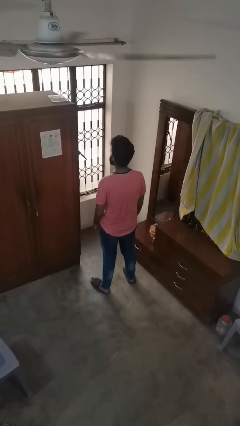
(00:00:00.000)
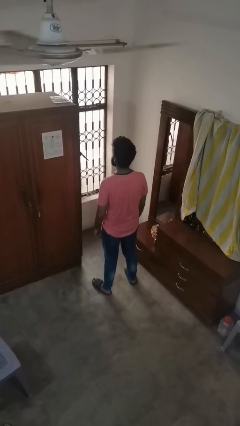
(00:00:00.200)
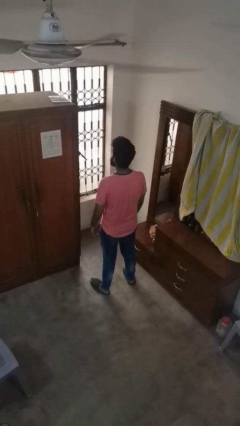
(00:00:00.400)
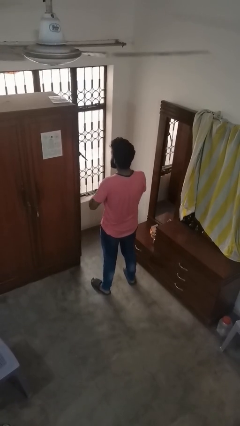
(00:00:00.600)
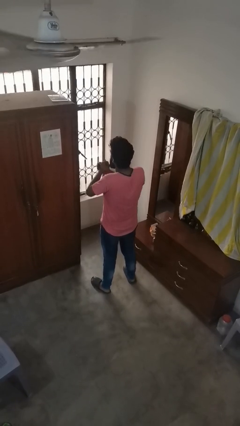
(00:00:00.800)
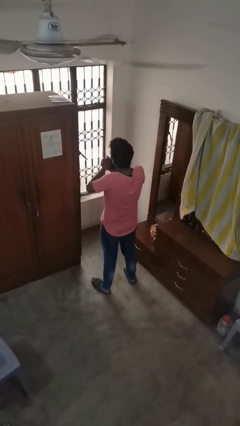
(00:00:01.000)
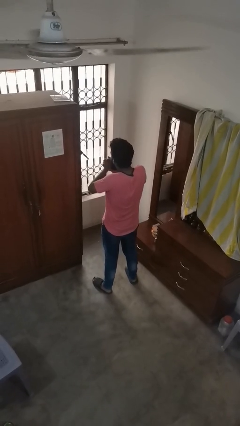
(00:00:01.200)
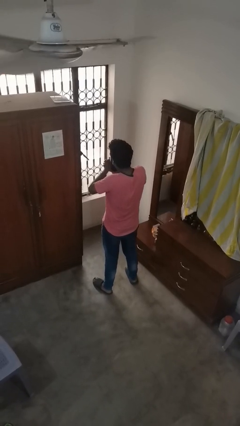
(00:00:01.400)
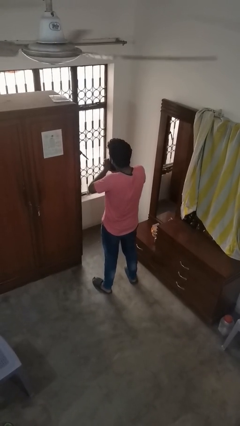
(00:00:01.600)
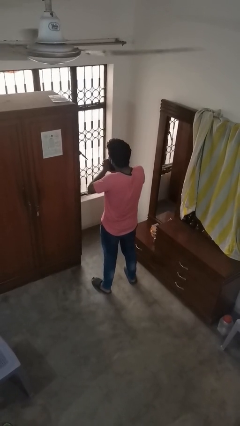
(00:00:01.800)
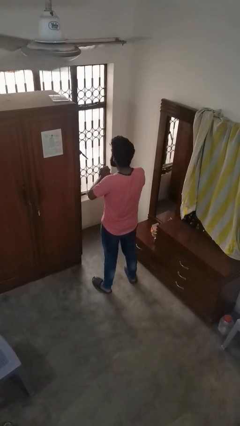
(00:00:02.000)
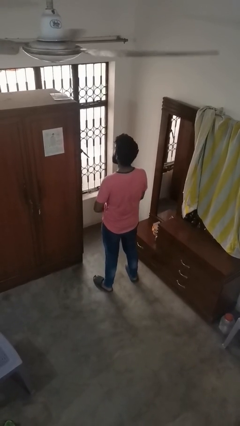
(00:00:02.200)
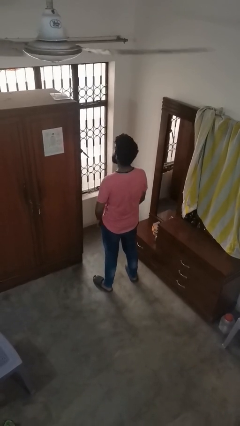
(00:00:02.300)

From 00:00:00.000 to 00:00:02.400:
person blows into hands

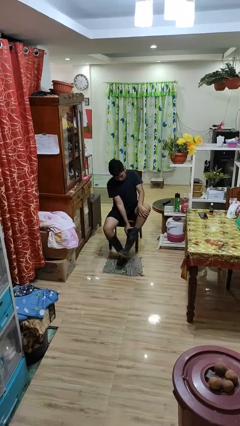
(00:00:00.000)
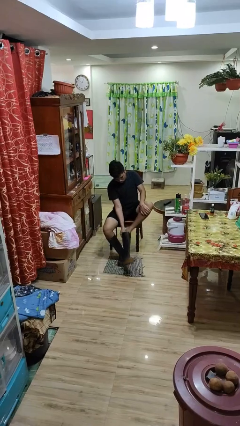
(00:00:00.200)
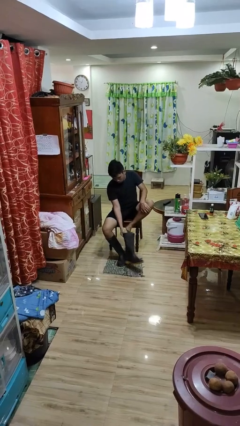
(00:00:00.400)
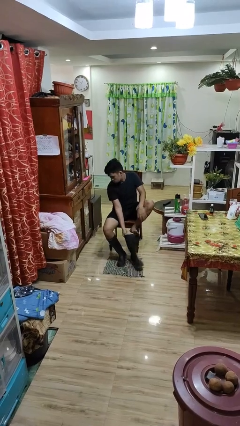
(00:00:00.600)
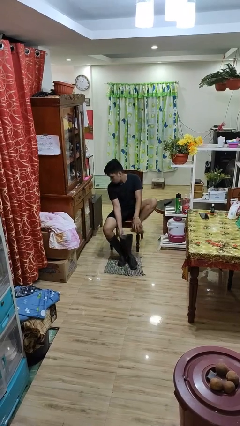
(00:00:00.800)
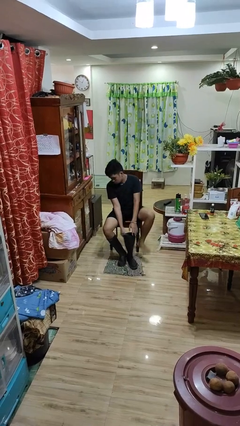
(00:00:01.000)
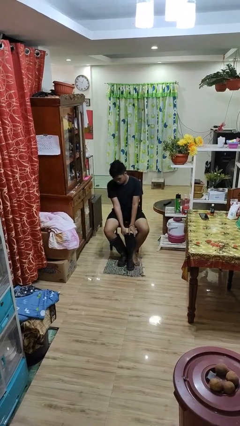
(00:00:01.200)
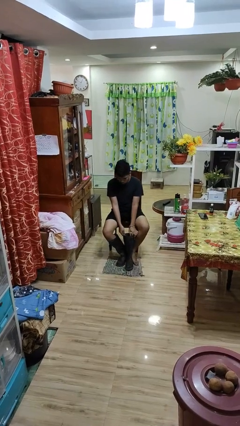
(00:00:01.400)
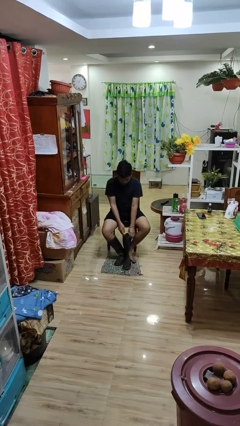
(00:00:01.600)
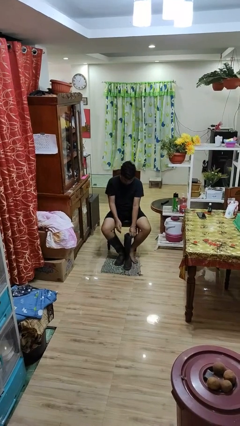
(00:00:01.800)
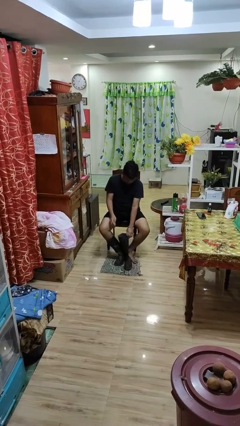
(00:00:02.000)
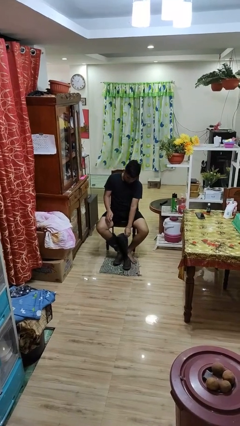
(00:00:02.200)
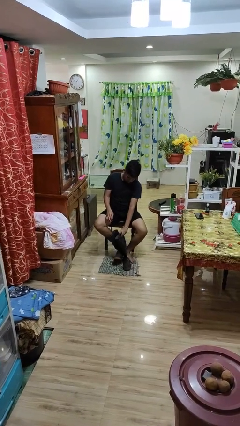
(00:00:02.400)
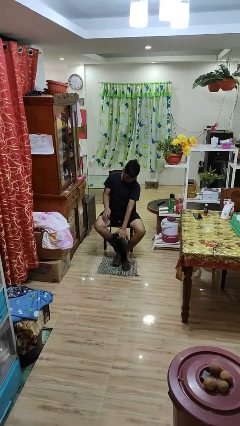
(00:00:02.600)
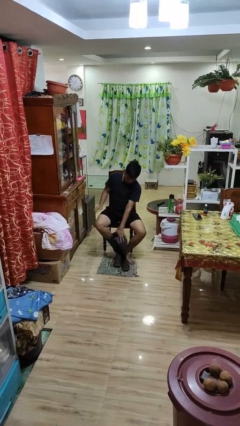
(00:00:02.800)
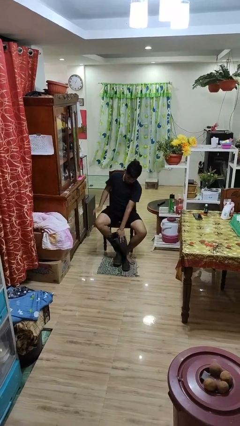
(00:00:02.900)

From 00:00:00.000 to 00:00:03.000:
person uses television remote

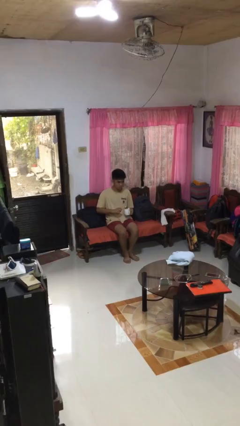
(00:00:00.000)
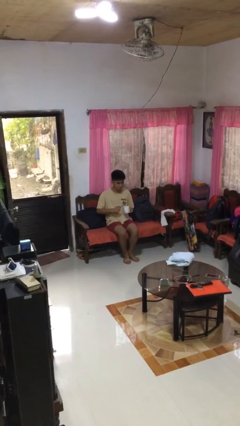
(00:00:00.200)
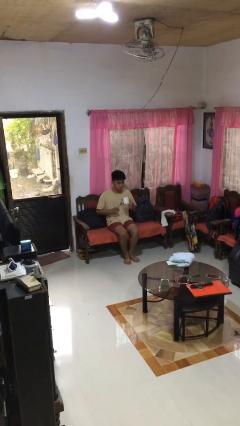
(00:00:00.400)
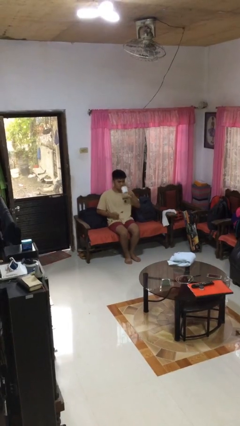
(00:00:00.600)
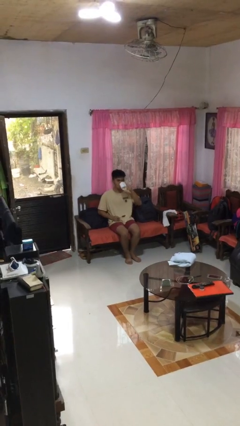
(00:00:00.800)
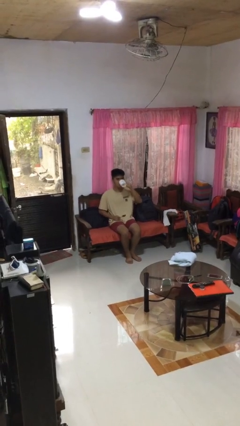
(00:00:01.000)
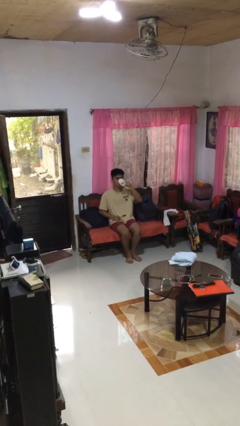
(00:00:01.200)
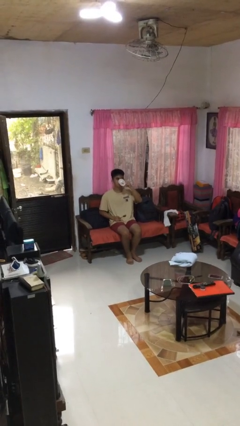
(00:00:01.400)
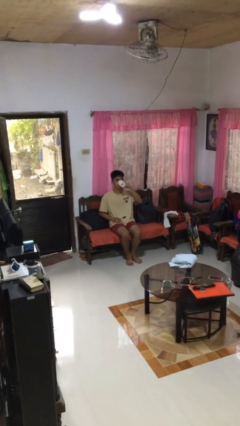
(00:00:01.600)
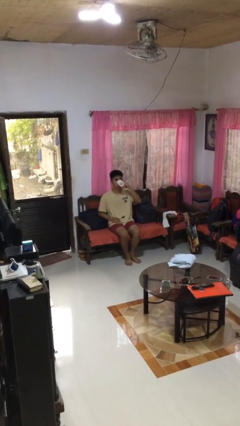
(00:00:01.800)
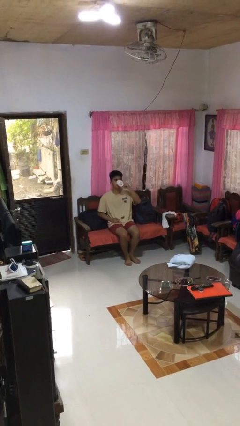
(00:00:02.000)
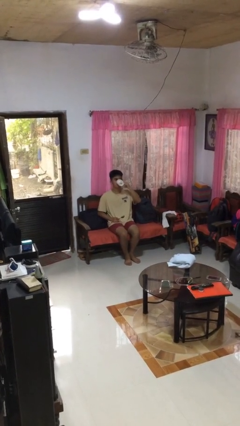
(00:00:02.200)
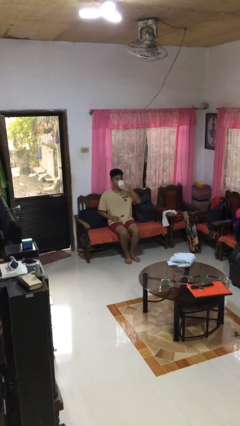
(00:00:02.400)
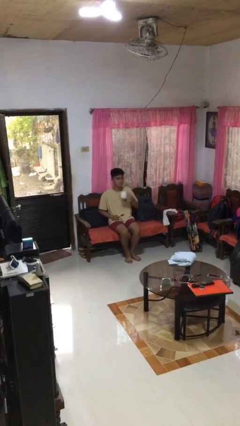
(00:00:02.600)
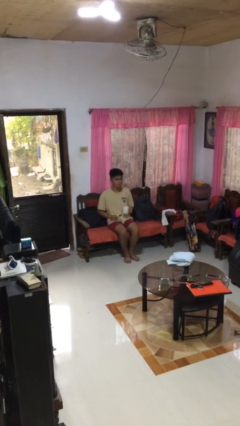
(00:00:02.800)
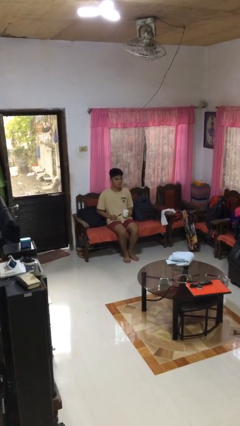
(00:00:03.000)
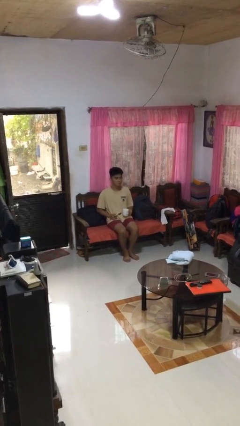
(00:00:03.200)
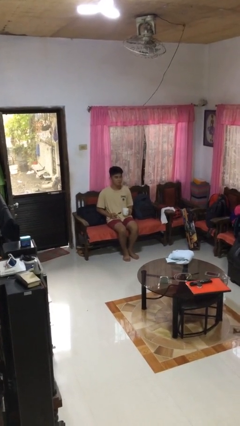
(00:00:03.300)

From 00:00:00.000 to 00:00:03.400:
person drinks from mug

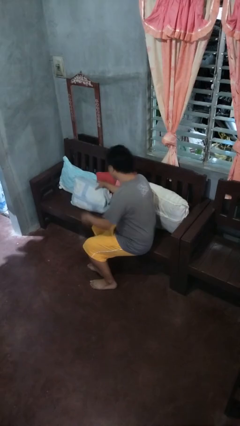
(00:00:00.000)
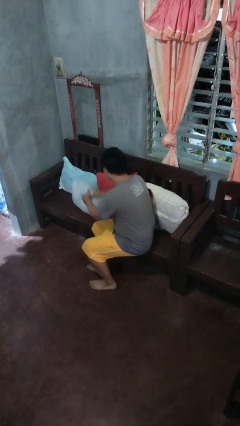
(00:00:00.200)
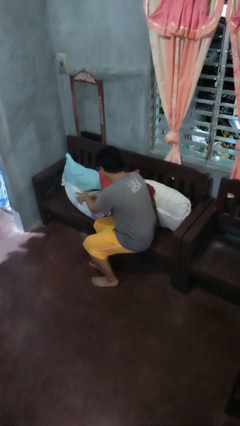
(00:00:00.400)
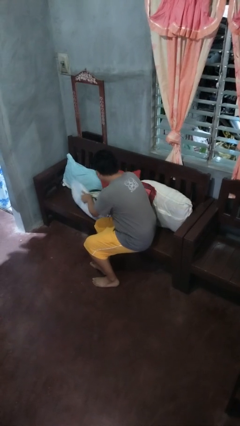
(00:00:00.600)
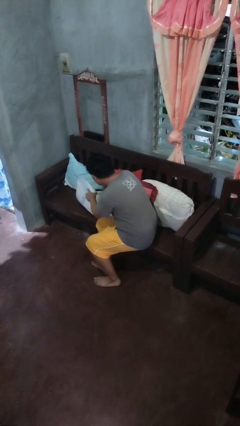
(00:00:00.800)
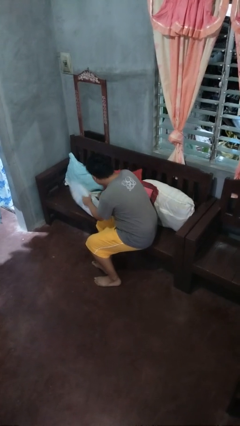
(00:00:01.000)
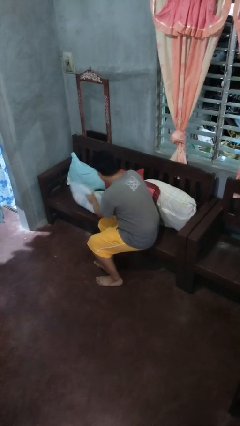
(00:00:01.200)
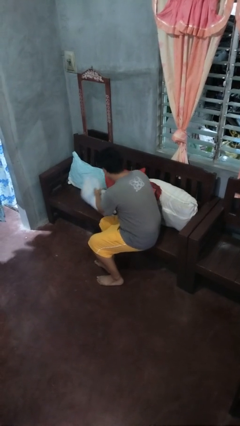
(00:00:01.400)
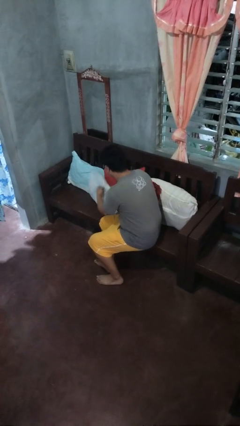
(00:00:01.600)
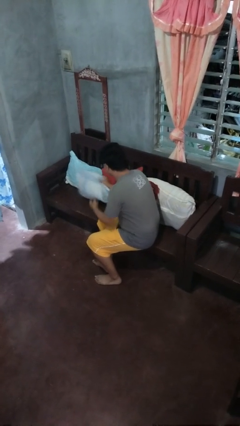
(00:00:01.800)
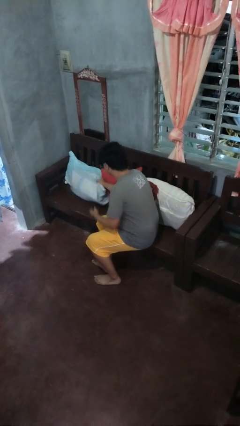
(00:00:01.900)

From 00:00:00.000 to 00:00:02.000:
person searches in couch

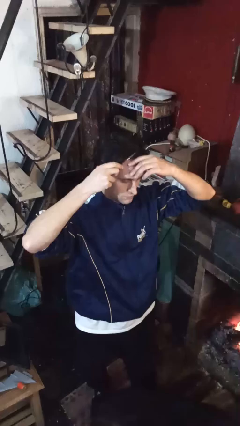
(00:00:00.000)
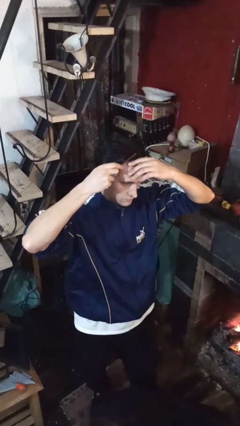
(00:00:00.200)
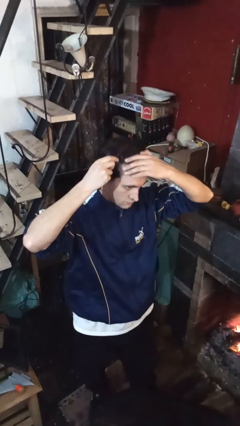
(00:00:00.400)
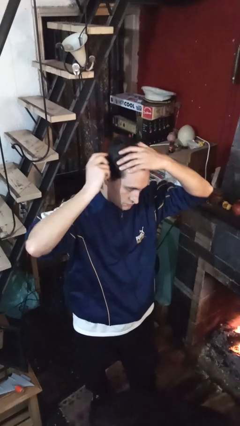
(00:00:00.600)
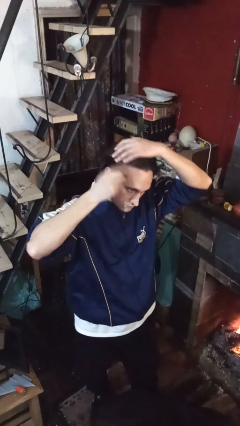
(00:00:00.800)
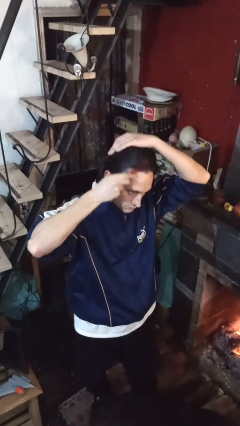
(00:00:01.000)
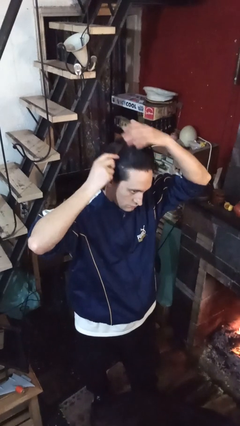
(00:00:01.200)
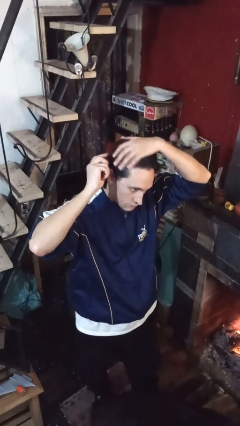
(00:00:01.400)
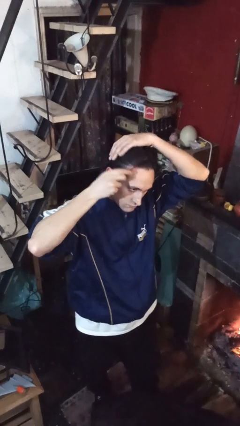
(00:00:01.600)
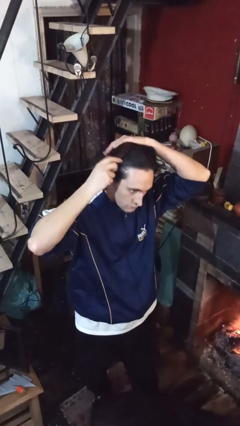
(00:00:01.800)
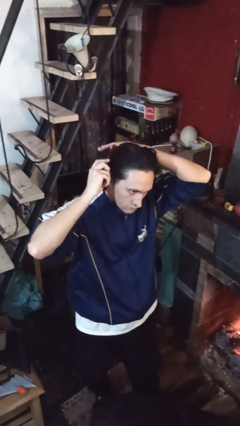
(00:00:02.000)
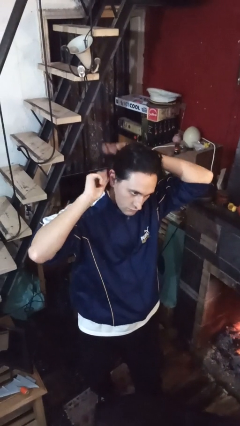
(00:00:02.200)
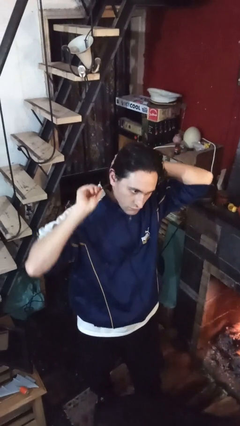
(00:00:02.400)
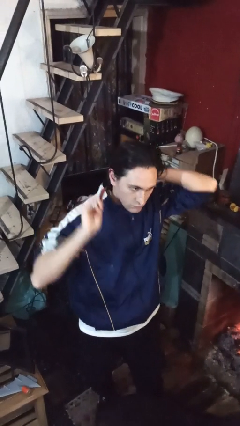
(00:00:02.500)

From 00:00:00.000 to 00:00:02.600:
person brushes hair

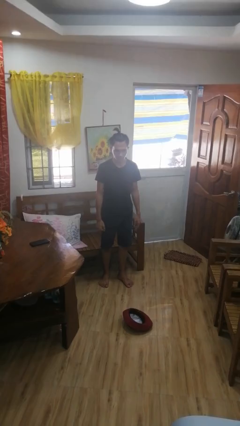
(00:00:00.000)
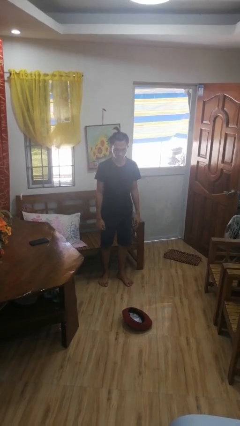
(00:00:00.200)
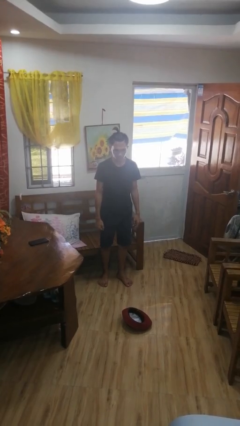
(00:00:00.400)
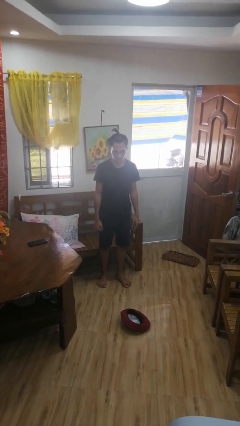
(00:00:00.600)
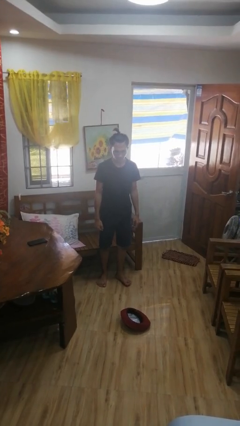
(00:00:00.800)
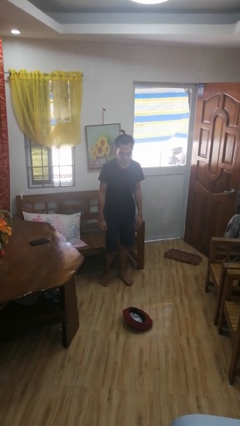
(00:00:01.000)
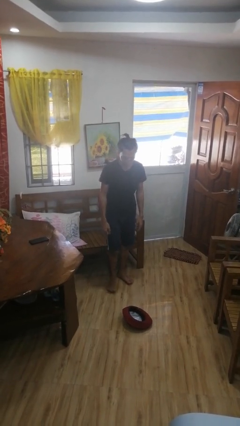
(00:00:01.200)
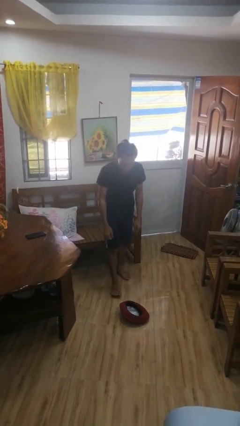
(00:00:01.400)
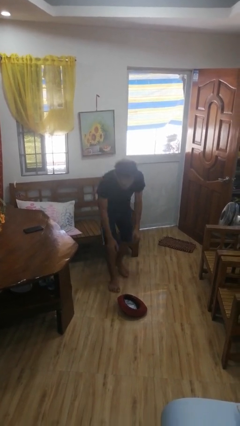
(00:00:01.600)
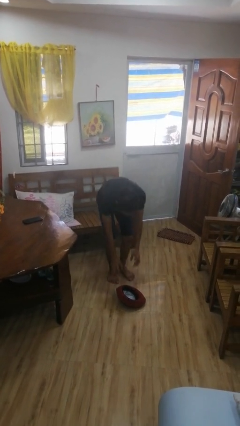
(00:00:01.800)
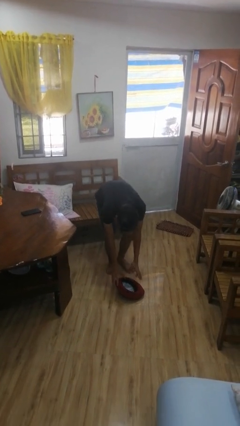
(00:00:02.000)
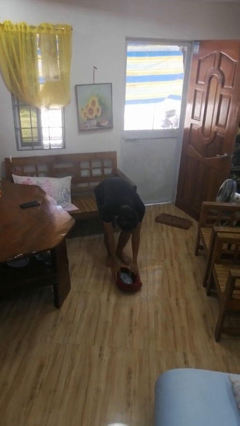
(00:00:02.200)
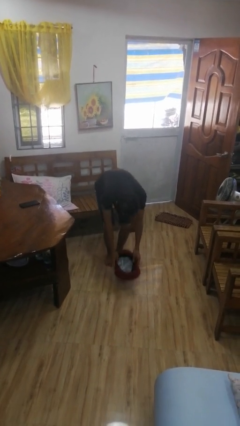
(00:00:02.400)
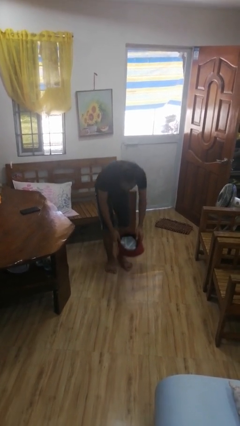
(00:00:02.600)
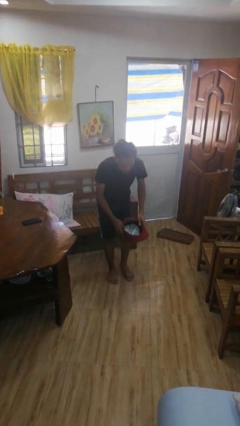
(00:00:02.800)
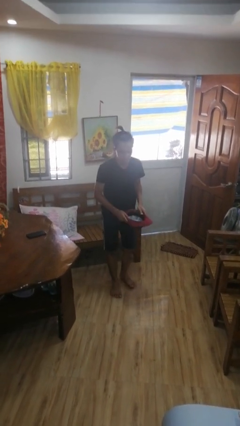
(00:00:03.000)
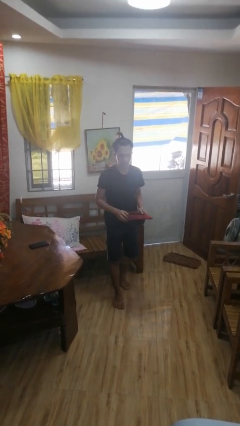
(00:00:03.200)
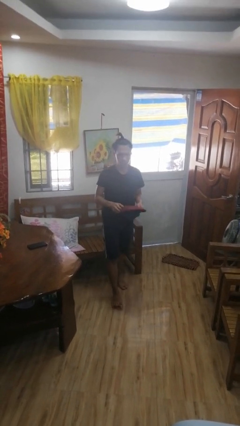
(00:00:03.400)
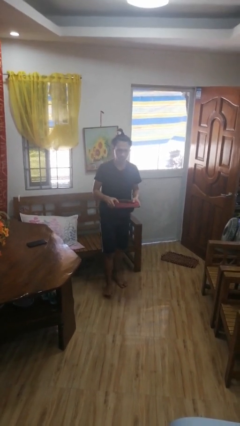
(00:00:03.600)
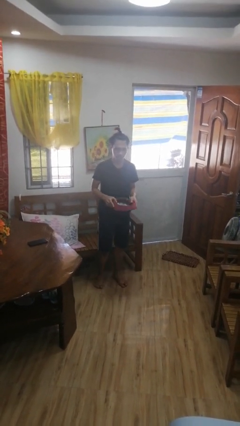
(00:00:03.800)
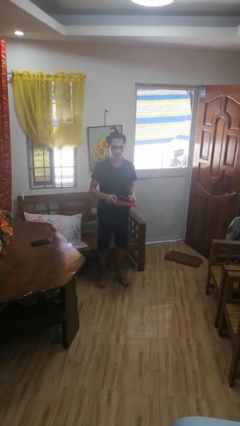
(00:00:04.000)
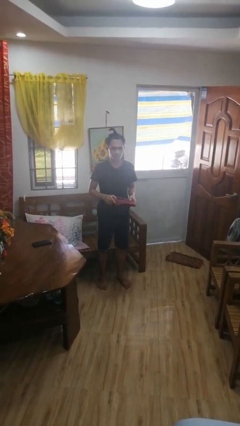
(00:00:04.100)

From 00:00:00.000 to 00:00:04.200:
person picks up object from floor
